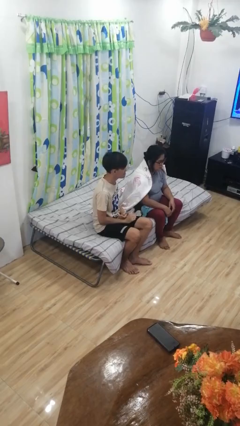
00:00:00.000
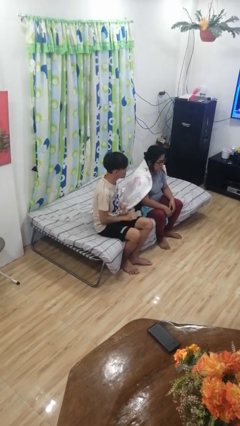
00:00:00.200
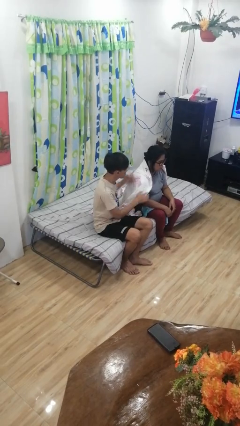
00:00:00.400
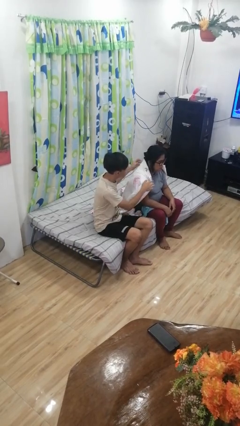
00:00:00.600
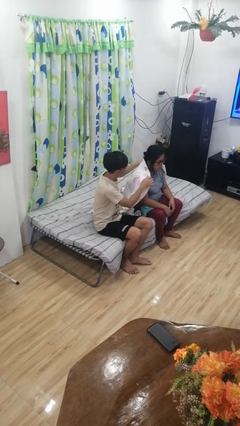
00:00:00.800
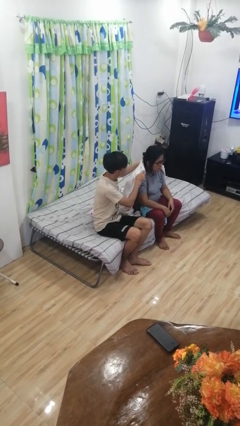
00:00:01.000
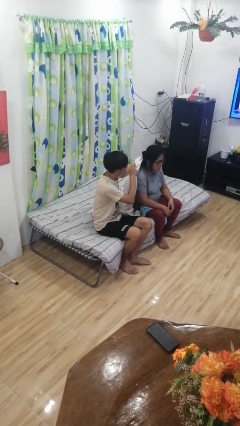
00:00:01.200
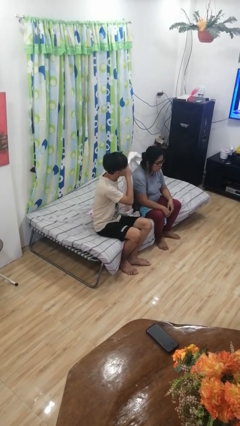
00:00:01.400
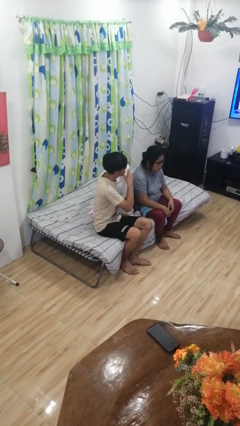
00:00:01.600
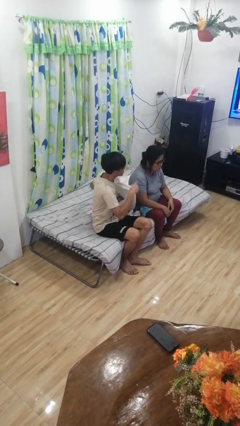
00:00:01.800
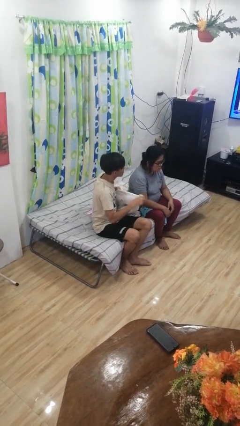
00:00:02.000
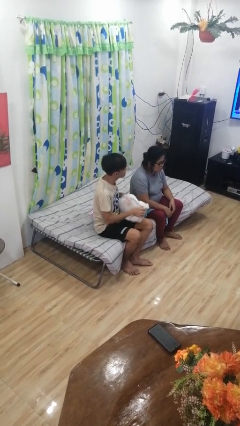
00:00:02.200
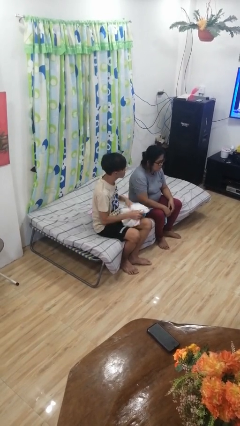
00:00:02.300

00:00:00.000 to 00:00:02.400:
person uncovers friend with blanket

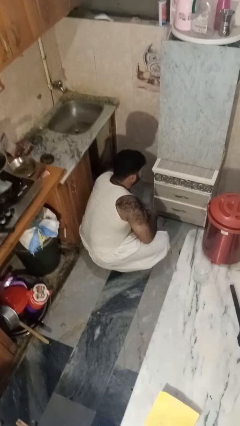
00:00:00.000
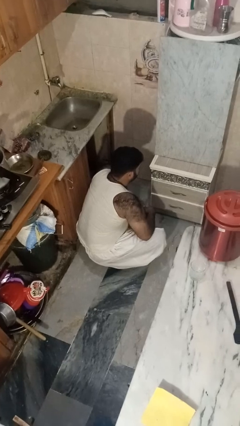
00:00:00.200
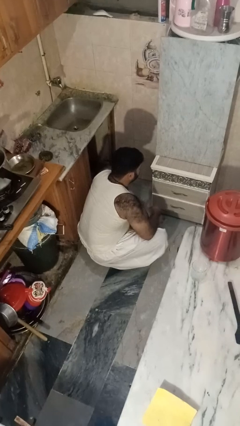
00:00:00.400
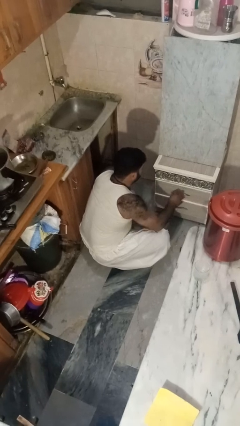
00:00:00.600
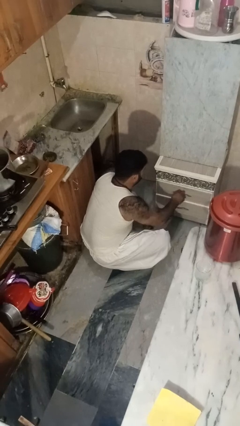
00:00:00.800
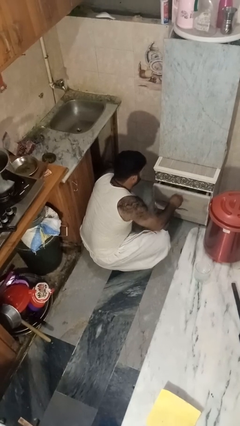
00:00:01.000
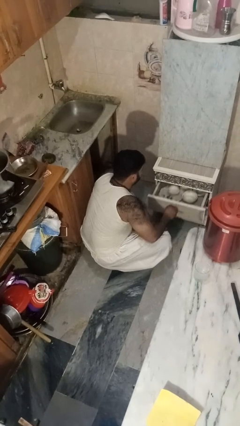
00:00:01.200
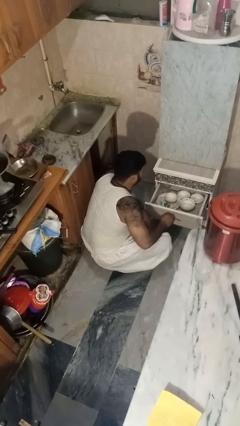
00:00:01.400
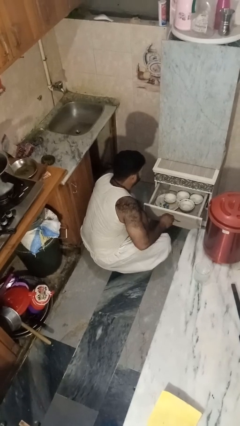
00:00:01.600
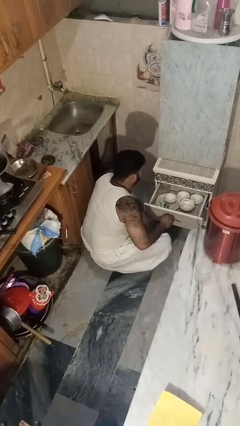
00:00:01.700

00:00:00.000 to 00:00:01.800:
person opens kitchen drawer

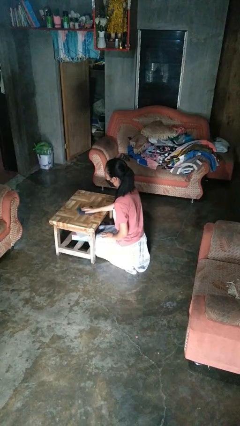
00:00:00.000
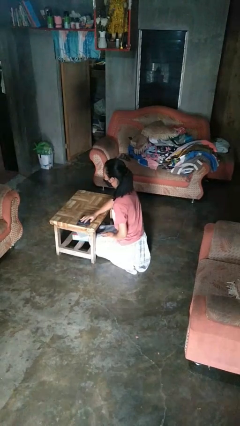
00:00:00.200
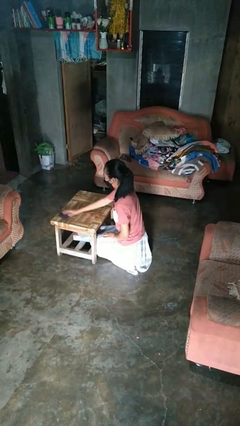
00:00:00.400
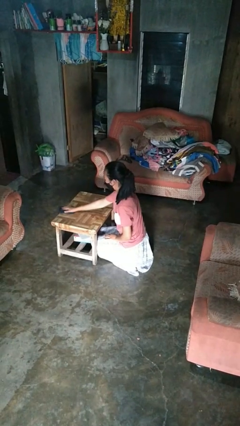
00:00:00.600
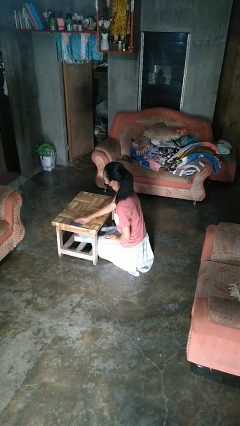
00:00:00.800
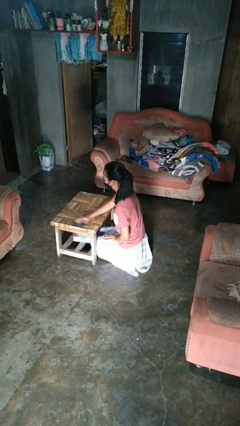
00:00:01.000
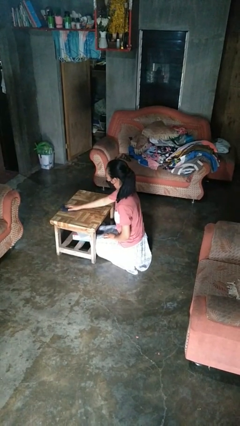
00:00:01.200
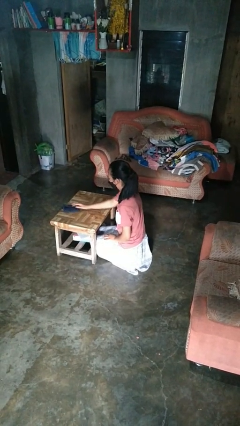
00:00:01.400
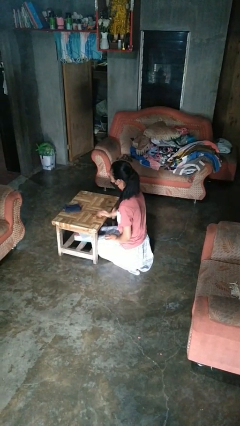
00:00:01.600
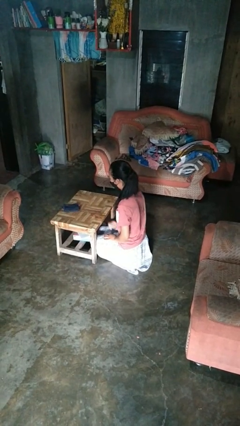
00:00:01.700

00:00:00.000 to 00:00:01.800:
person cleans table with rag

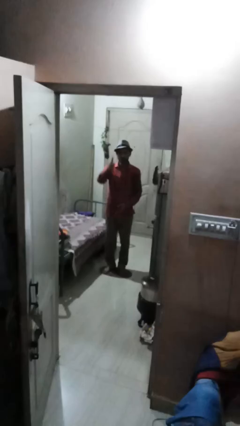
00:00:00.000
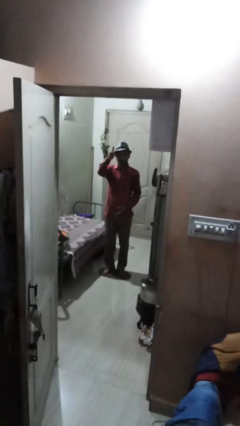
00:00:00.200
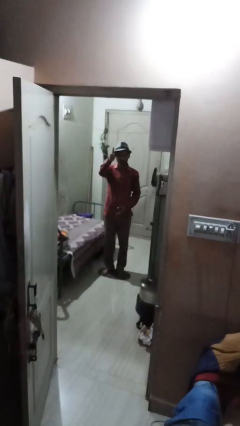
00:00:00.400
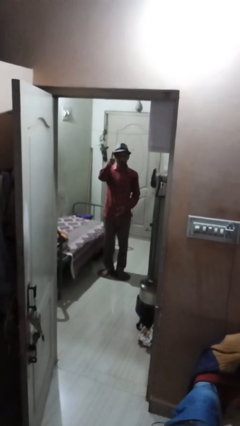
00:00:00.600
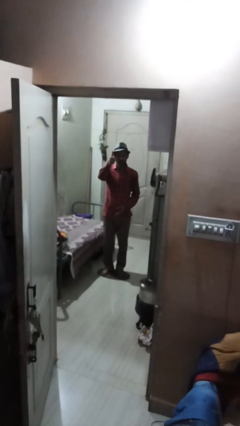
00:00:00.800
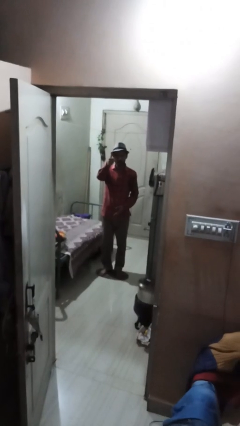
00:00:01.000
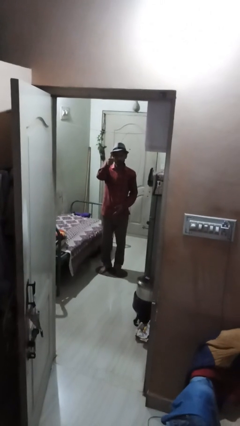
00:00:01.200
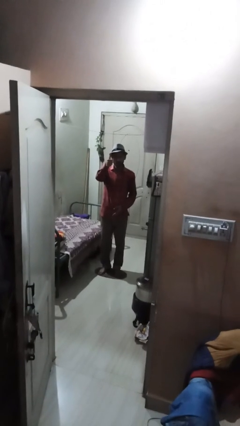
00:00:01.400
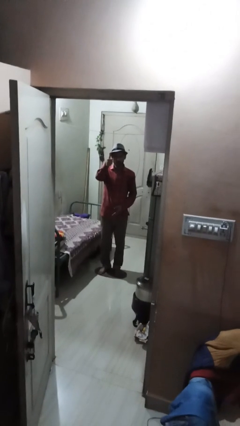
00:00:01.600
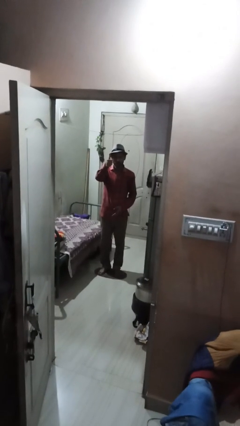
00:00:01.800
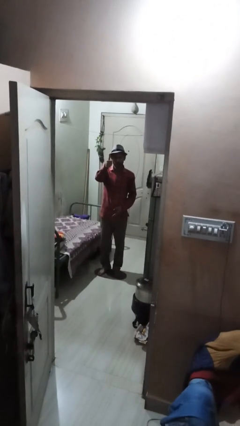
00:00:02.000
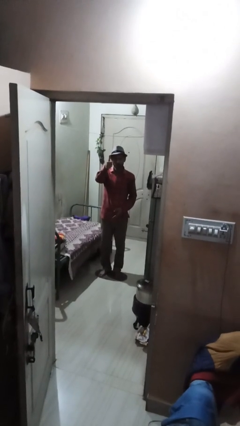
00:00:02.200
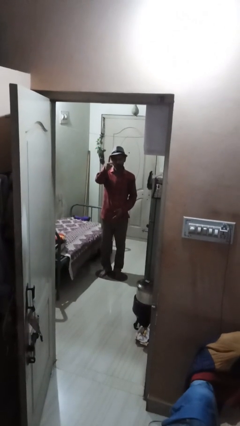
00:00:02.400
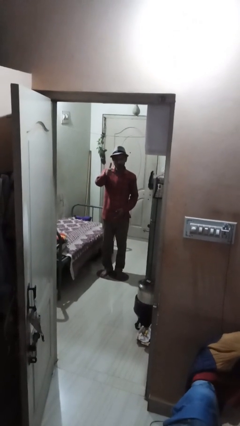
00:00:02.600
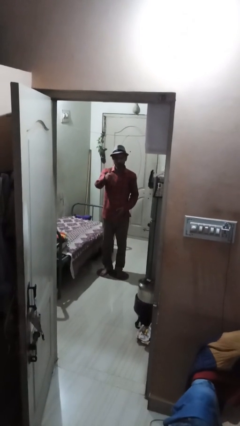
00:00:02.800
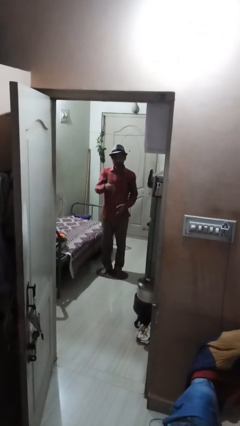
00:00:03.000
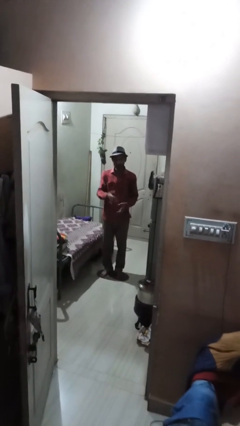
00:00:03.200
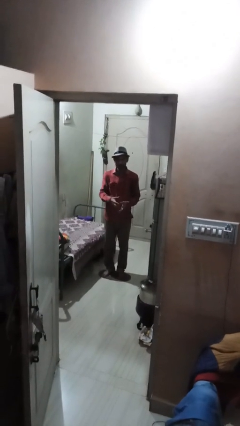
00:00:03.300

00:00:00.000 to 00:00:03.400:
person gestures thumbs up

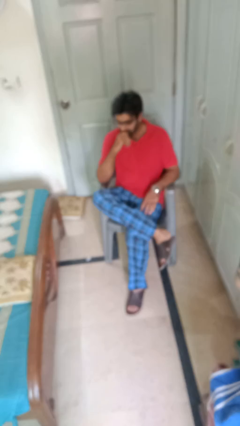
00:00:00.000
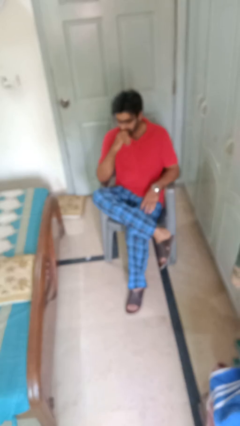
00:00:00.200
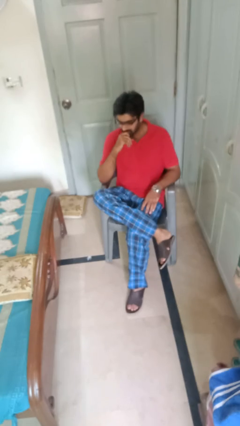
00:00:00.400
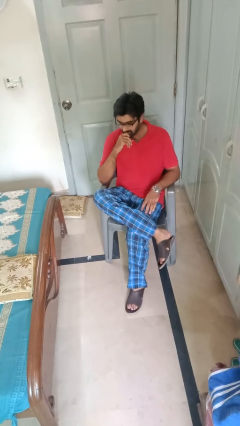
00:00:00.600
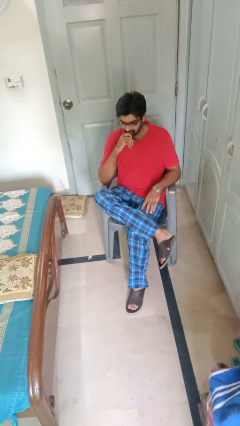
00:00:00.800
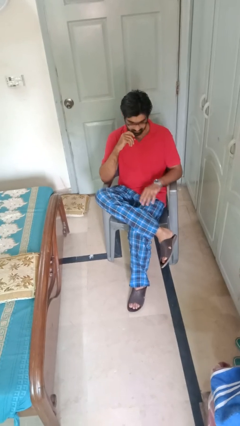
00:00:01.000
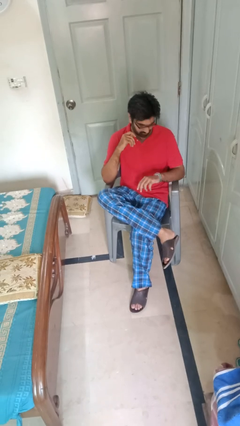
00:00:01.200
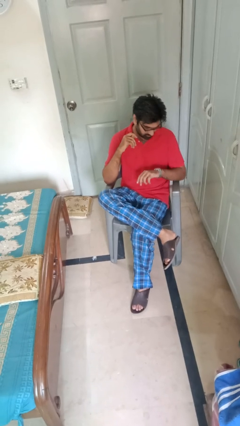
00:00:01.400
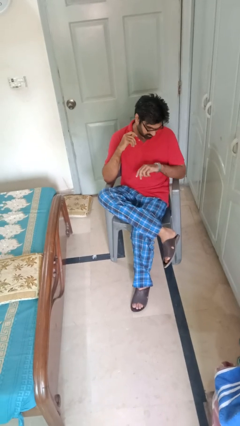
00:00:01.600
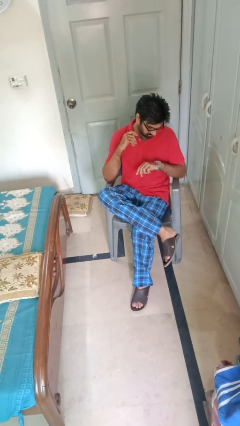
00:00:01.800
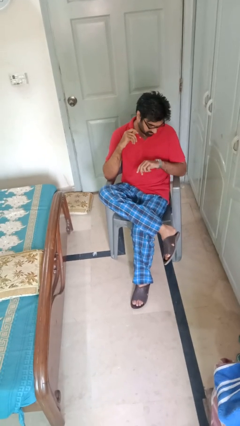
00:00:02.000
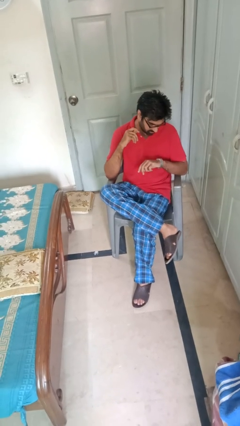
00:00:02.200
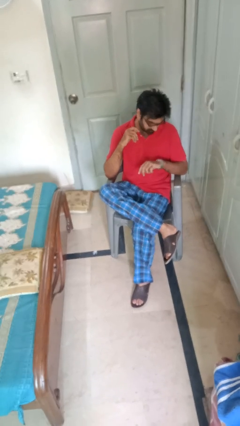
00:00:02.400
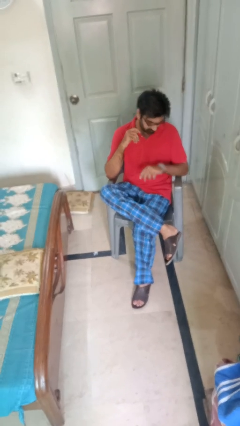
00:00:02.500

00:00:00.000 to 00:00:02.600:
person looks at wristwatch

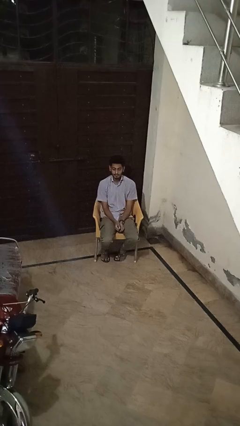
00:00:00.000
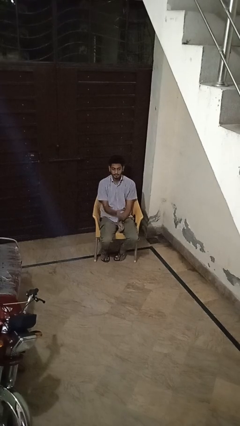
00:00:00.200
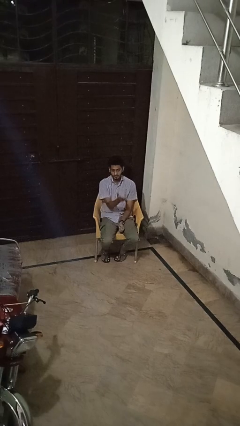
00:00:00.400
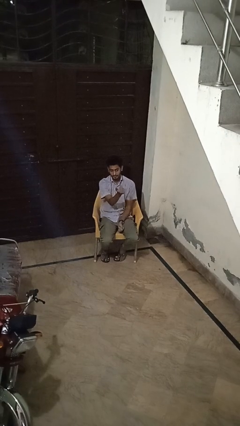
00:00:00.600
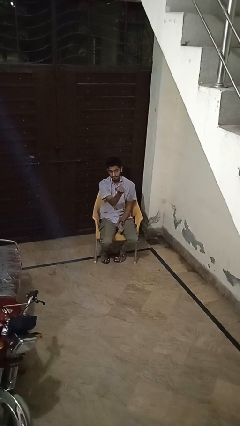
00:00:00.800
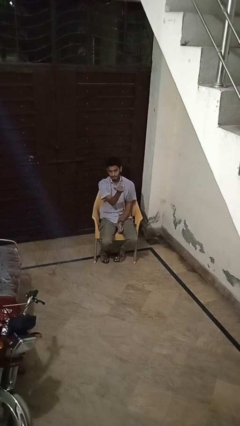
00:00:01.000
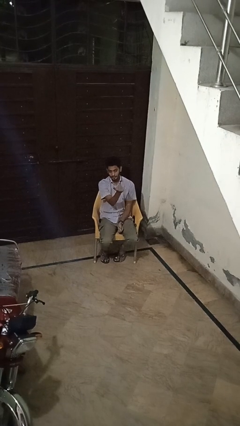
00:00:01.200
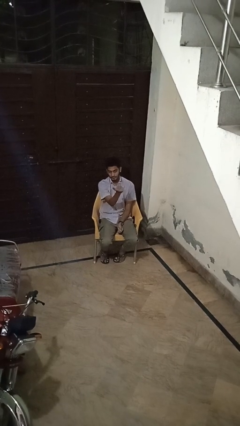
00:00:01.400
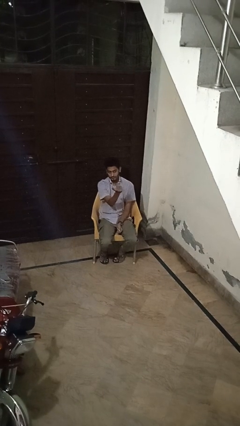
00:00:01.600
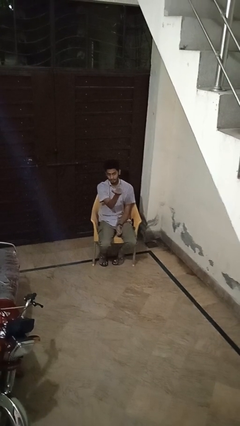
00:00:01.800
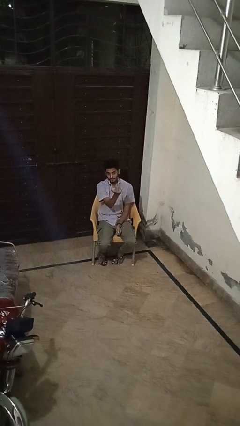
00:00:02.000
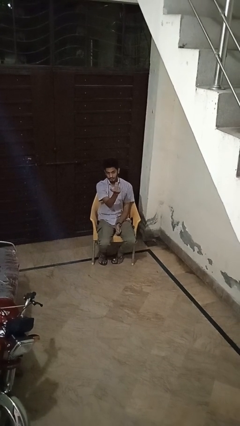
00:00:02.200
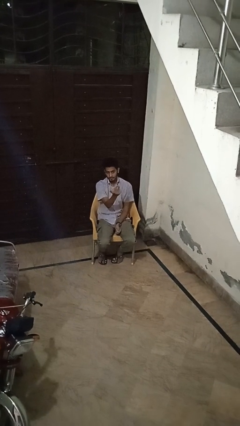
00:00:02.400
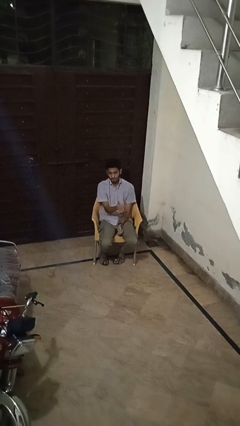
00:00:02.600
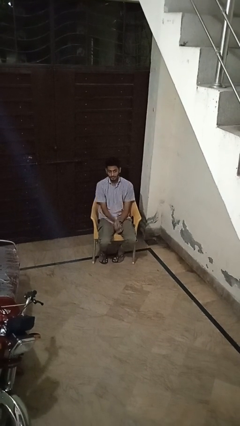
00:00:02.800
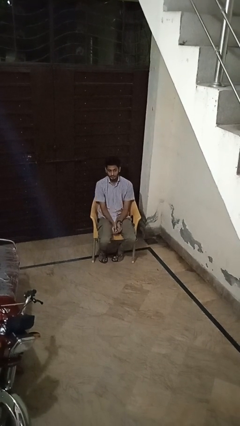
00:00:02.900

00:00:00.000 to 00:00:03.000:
person gestures come here

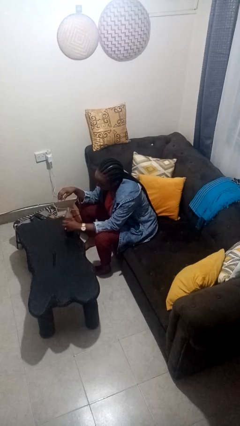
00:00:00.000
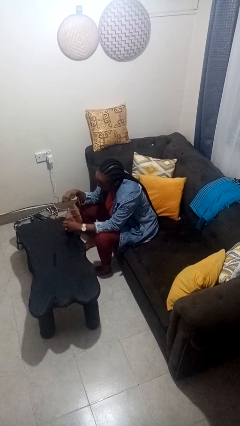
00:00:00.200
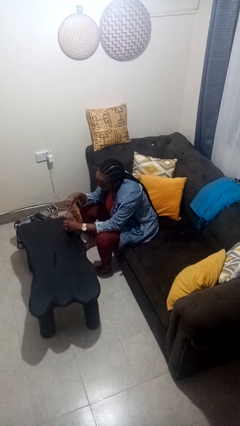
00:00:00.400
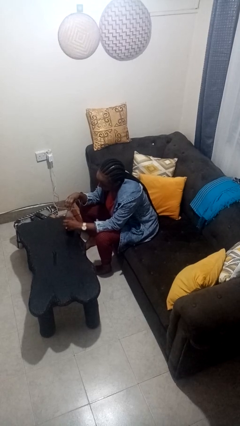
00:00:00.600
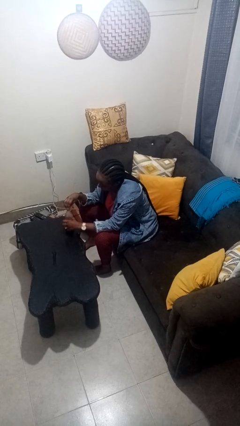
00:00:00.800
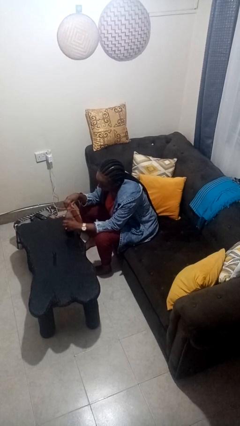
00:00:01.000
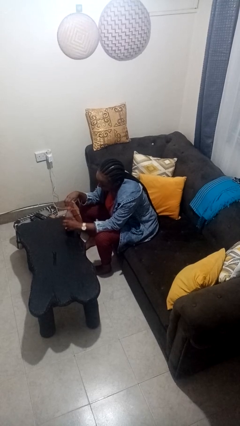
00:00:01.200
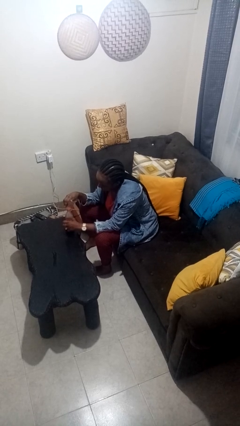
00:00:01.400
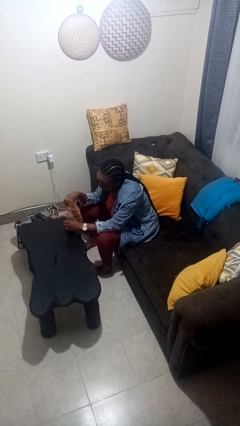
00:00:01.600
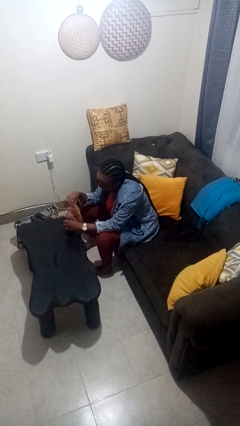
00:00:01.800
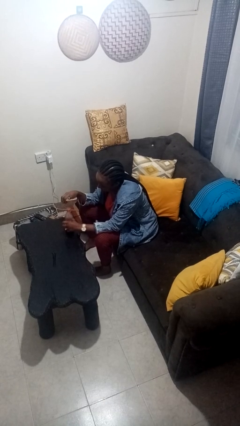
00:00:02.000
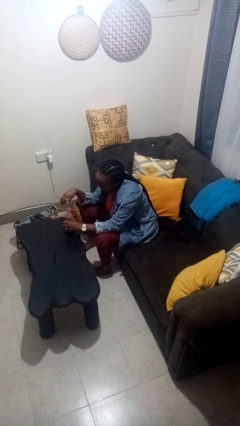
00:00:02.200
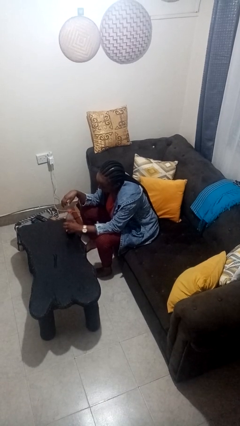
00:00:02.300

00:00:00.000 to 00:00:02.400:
person screws lid to bottle
